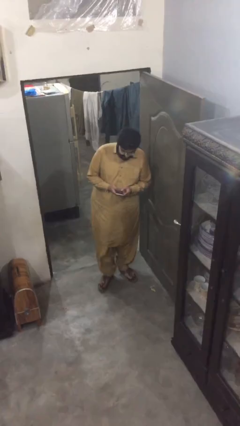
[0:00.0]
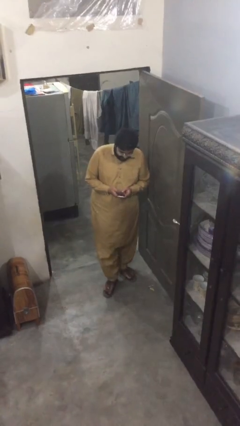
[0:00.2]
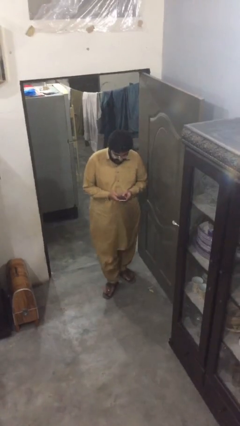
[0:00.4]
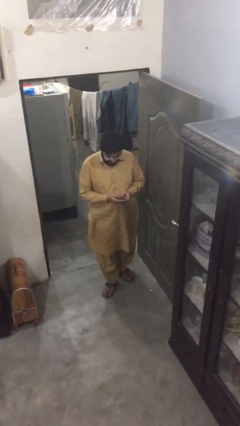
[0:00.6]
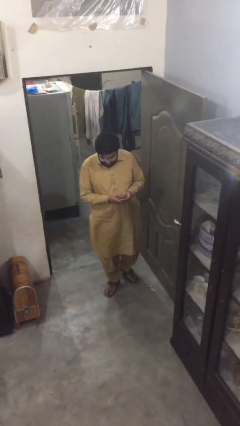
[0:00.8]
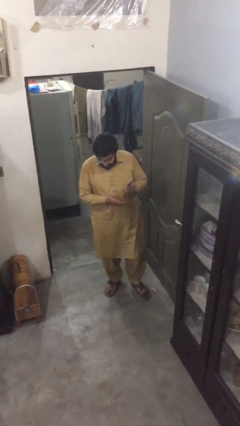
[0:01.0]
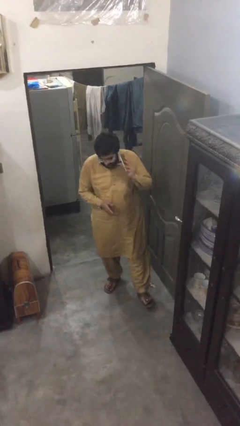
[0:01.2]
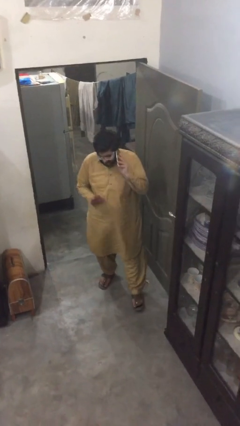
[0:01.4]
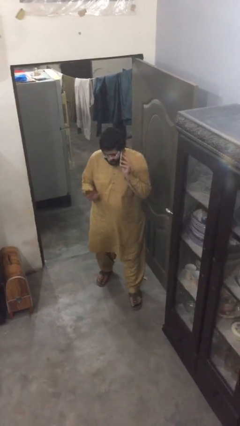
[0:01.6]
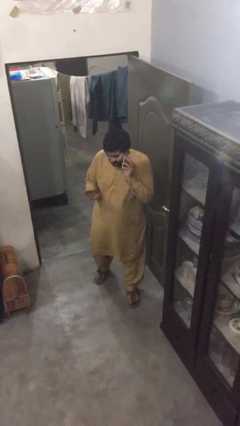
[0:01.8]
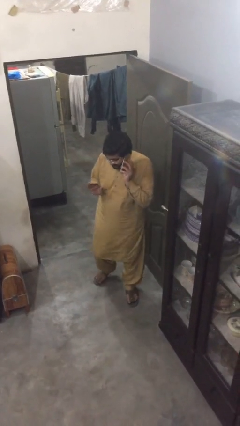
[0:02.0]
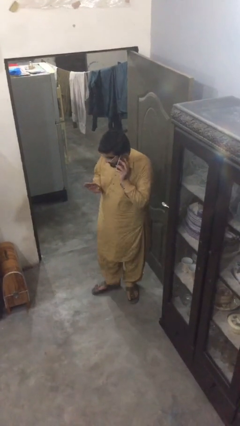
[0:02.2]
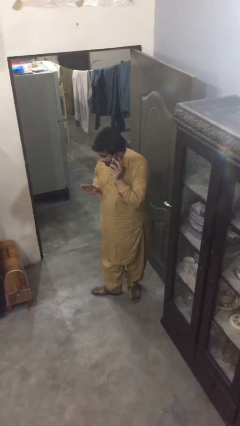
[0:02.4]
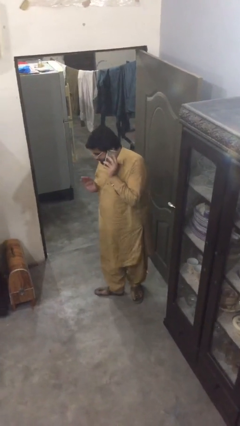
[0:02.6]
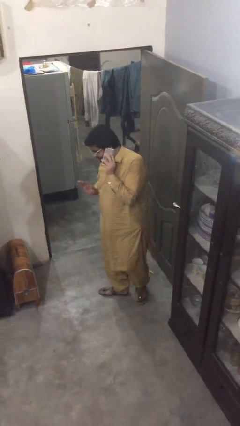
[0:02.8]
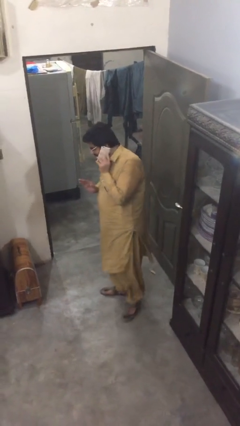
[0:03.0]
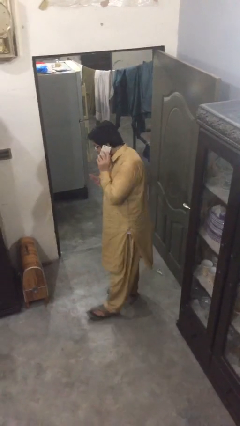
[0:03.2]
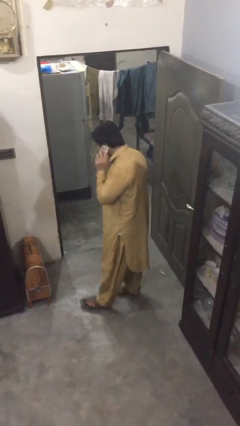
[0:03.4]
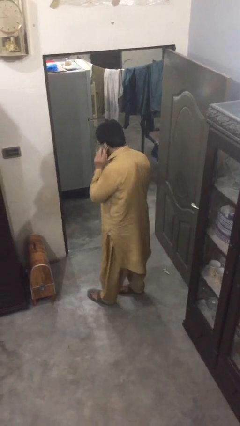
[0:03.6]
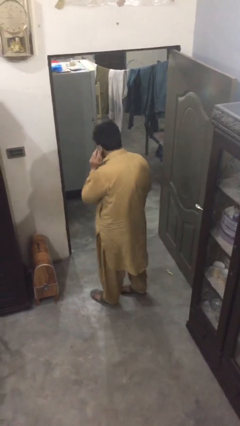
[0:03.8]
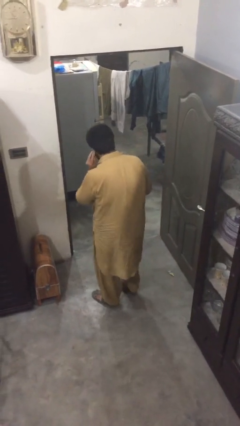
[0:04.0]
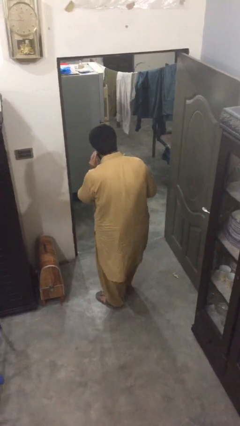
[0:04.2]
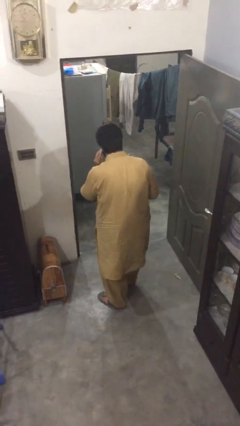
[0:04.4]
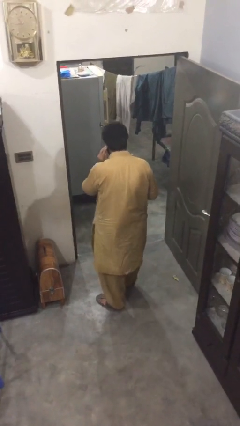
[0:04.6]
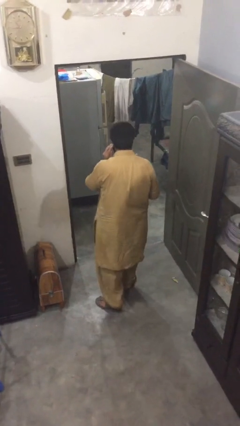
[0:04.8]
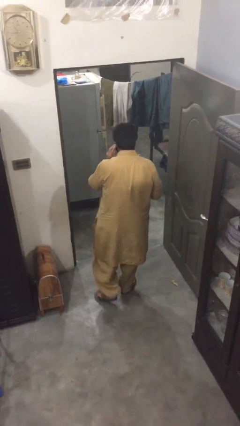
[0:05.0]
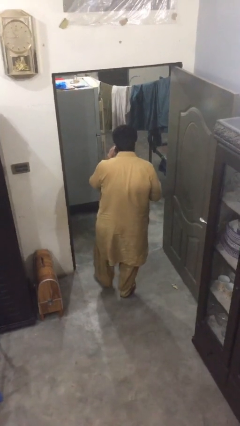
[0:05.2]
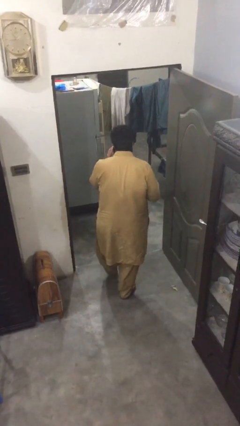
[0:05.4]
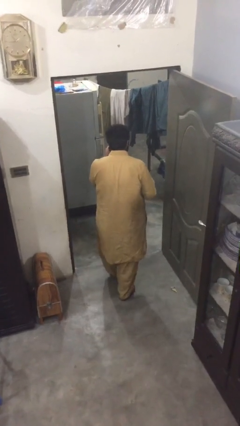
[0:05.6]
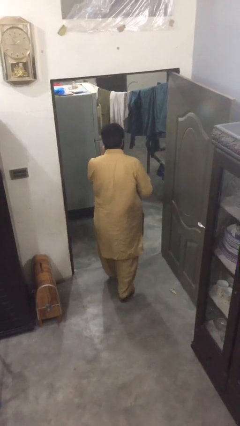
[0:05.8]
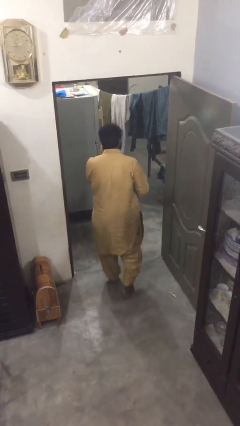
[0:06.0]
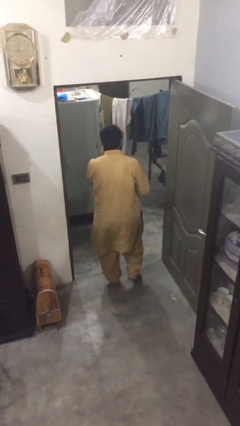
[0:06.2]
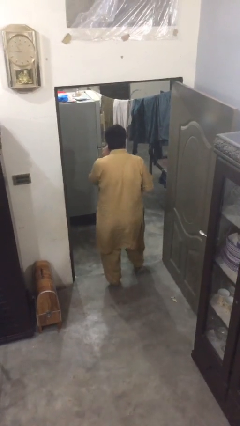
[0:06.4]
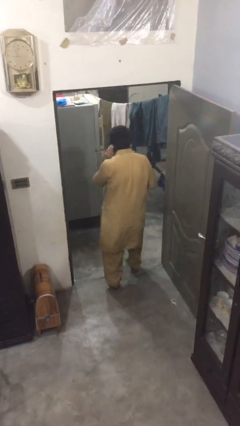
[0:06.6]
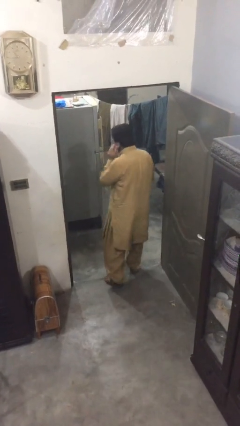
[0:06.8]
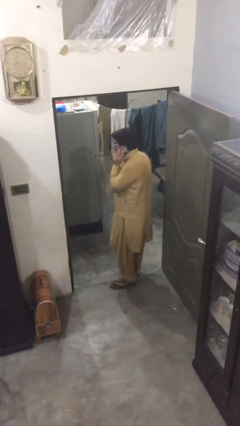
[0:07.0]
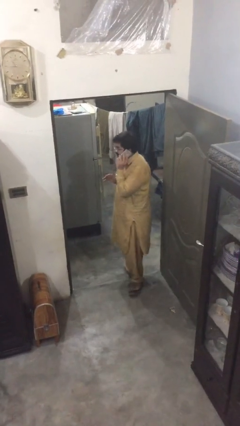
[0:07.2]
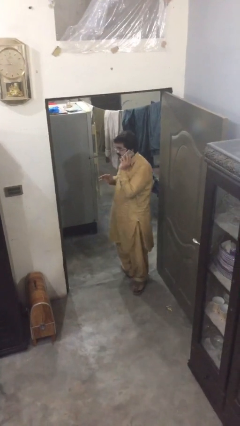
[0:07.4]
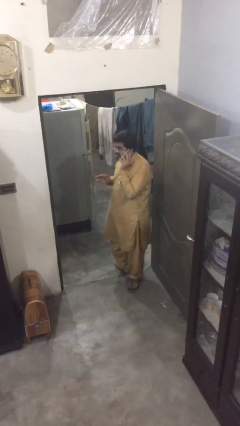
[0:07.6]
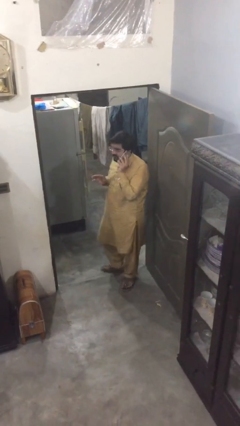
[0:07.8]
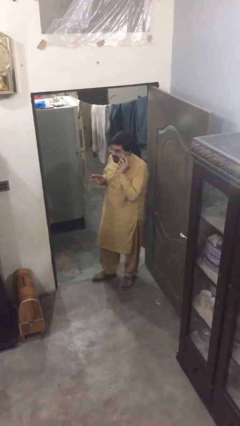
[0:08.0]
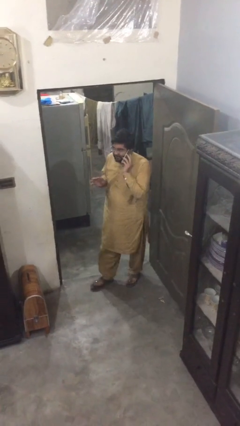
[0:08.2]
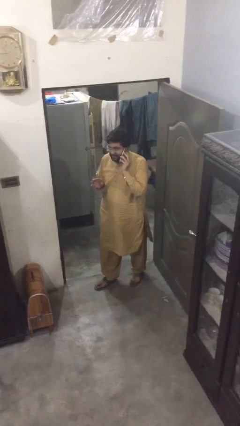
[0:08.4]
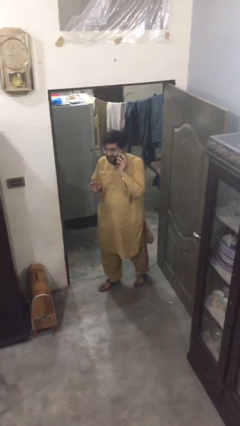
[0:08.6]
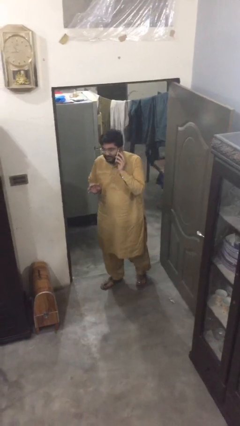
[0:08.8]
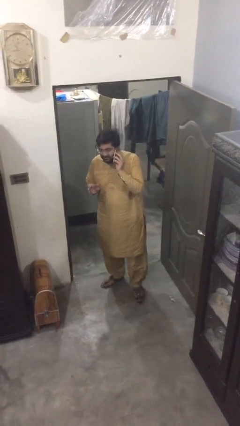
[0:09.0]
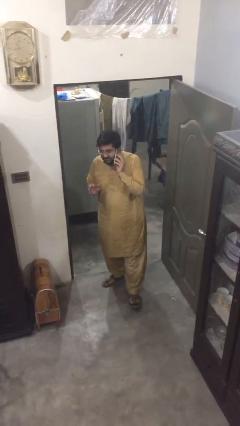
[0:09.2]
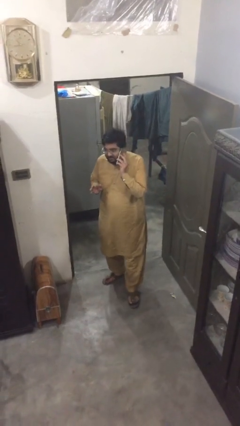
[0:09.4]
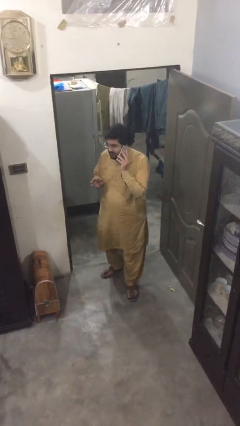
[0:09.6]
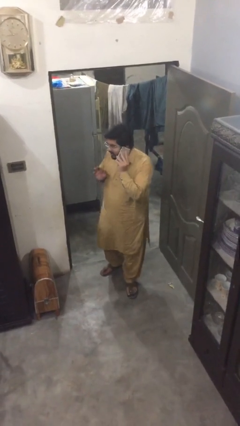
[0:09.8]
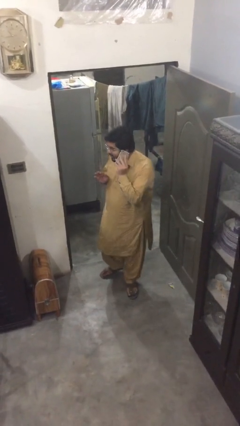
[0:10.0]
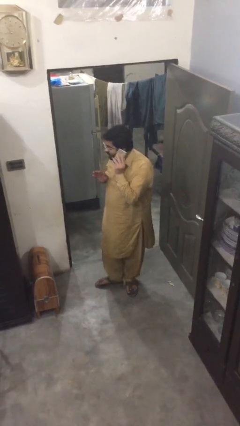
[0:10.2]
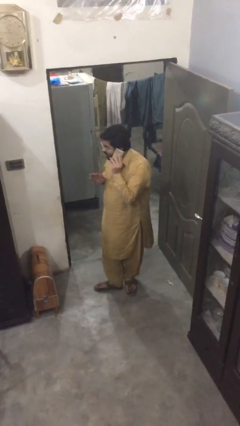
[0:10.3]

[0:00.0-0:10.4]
person talks on phone

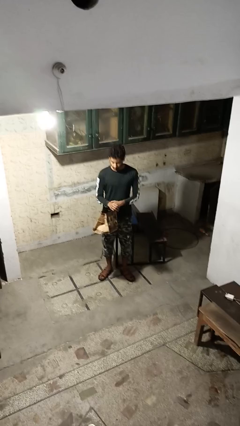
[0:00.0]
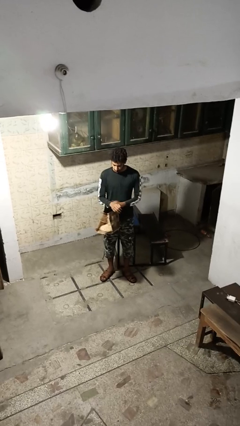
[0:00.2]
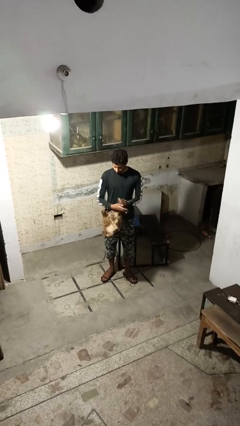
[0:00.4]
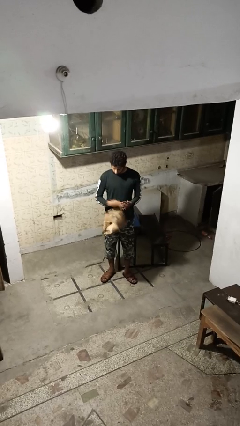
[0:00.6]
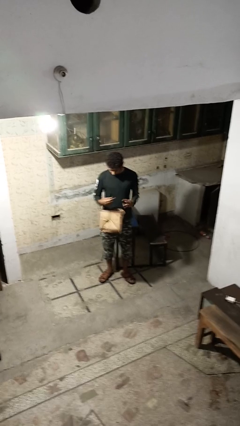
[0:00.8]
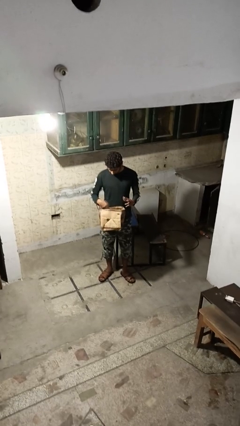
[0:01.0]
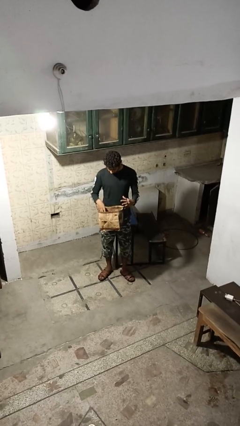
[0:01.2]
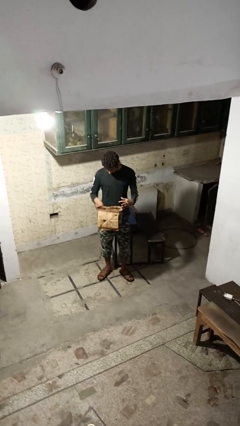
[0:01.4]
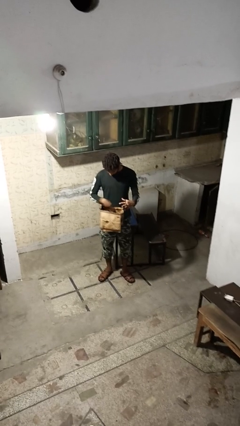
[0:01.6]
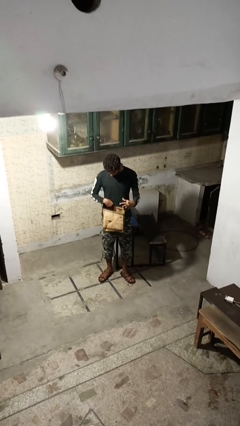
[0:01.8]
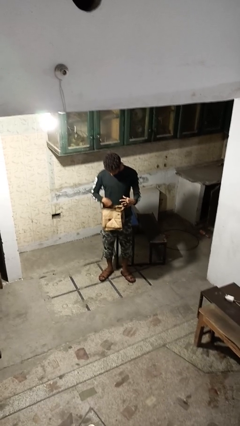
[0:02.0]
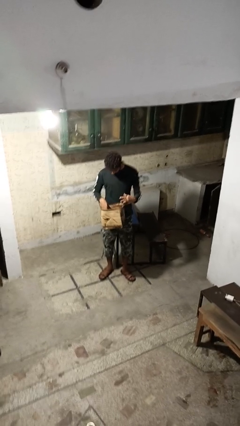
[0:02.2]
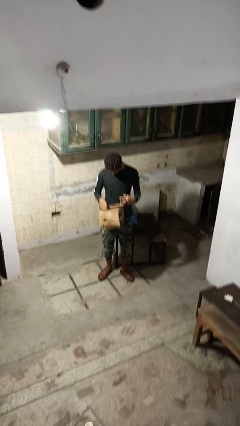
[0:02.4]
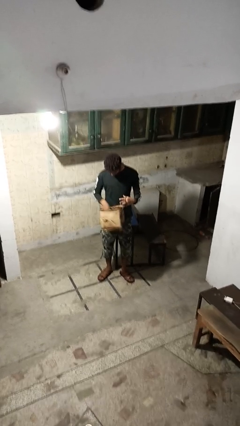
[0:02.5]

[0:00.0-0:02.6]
person searches in purse

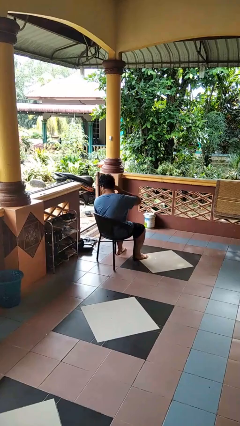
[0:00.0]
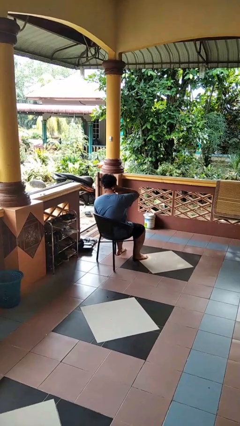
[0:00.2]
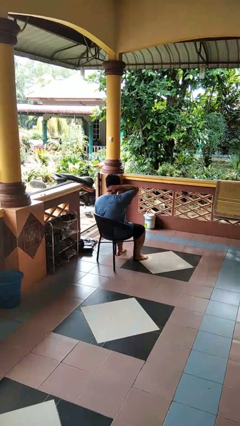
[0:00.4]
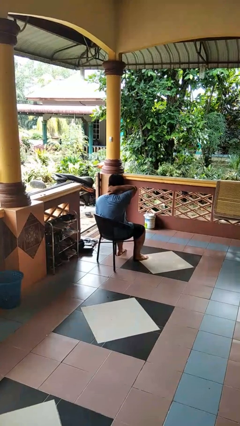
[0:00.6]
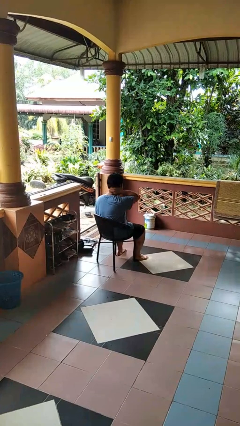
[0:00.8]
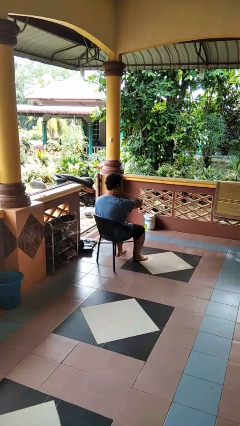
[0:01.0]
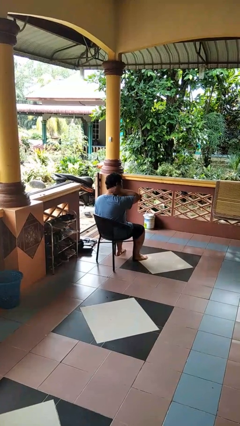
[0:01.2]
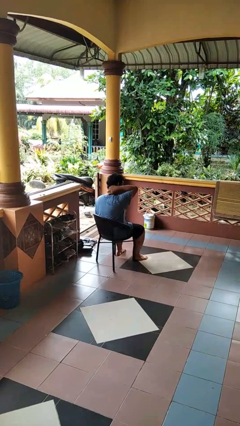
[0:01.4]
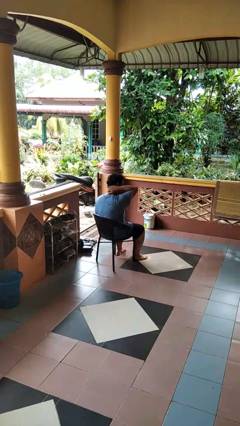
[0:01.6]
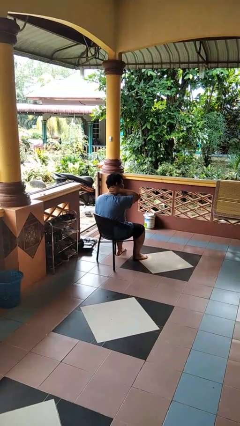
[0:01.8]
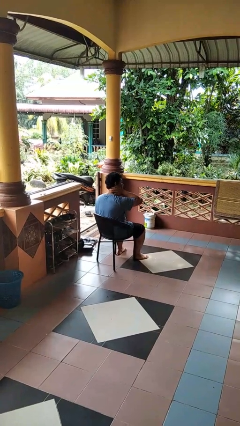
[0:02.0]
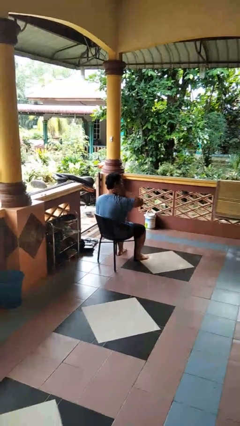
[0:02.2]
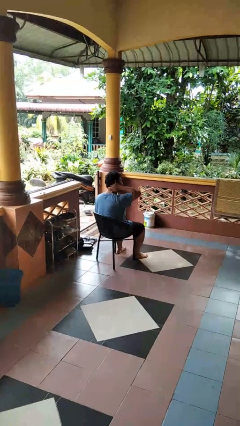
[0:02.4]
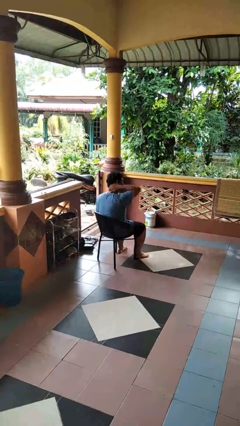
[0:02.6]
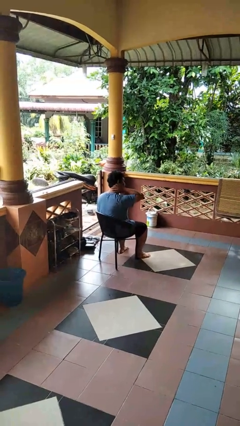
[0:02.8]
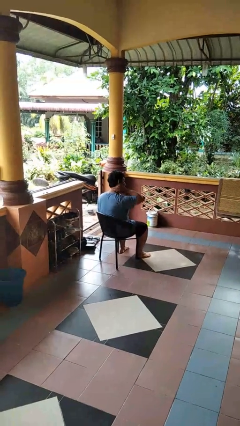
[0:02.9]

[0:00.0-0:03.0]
person rubs neck

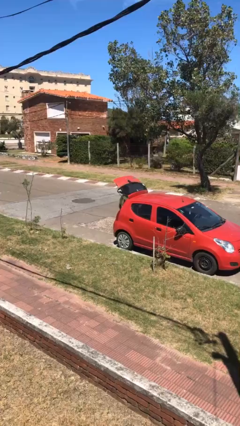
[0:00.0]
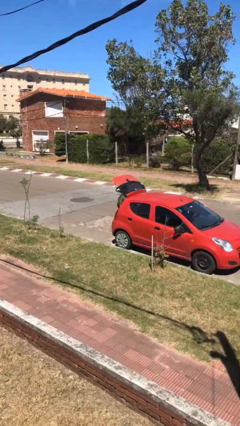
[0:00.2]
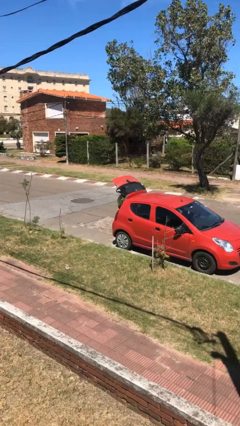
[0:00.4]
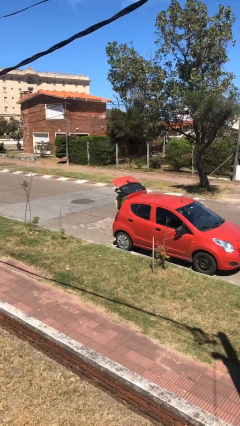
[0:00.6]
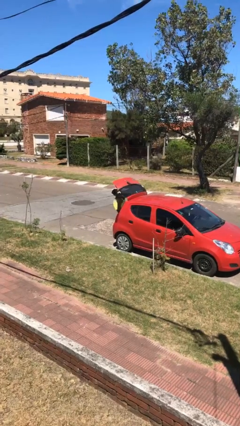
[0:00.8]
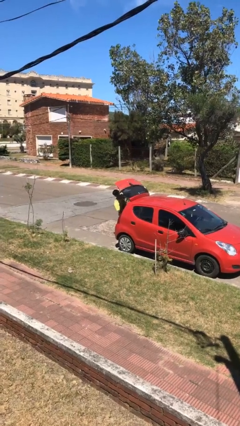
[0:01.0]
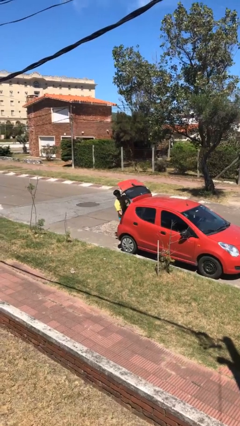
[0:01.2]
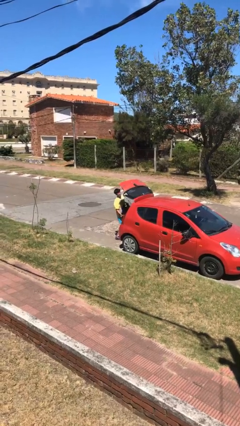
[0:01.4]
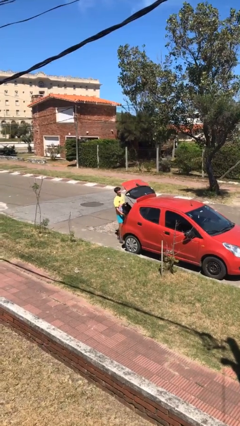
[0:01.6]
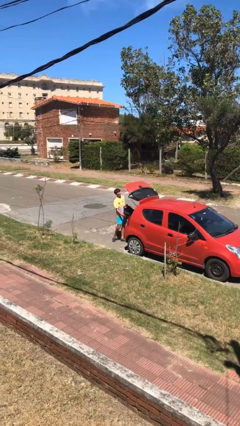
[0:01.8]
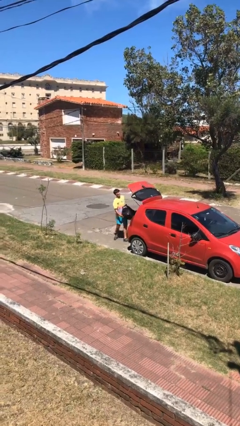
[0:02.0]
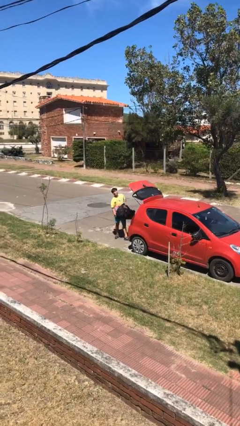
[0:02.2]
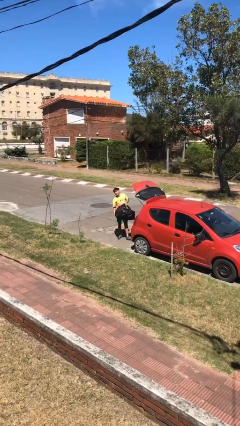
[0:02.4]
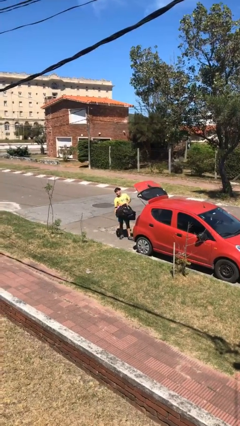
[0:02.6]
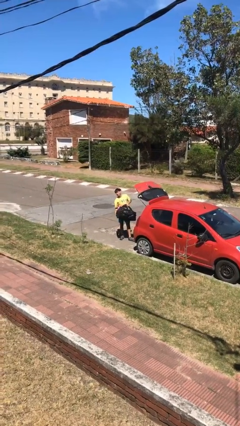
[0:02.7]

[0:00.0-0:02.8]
person unloads car
